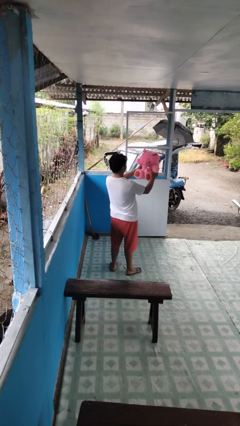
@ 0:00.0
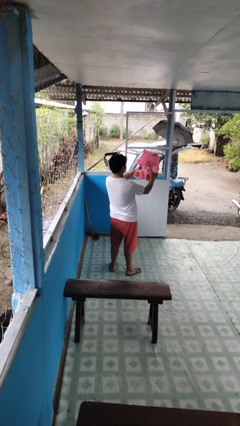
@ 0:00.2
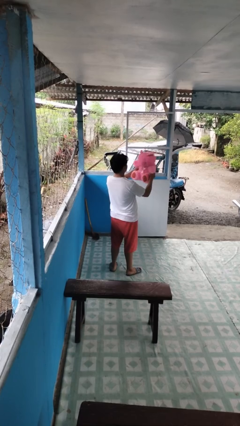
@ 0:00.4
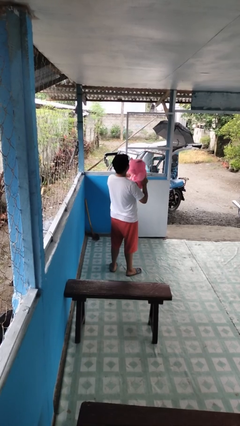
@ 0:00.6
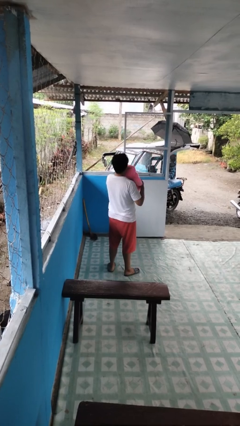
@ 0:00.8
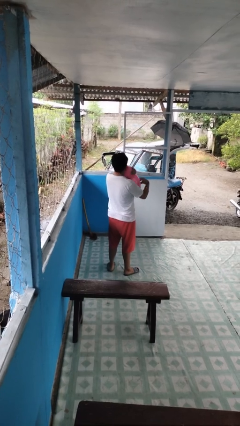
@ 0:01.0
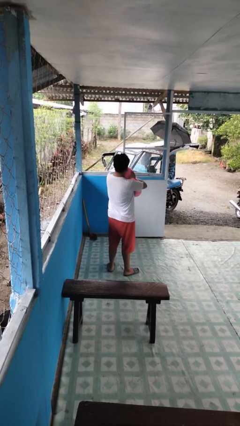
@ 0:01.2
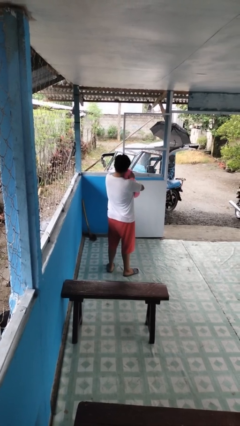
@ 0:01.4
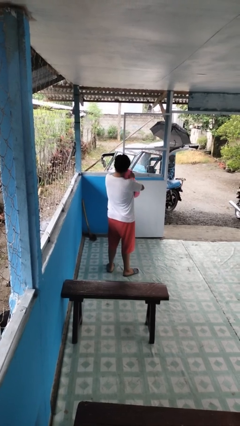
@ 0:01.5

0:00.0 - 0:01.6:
person hugs stuffed animal

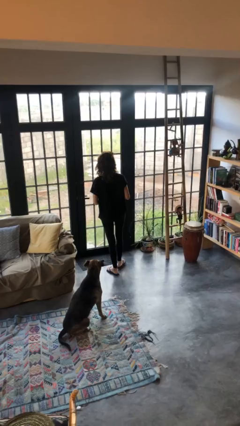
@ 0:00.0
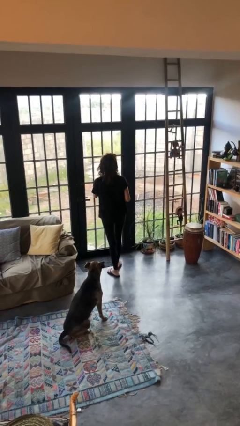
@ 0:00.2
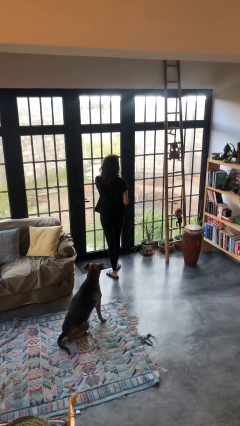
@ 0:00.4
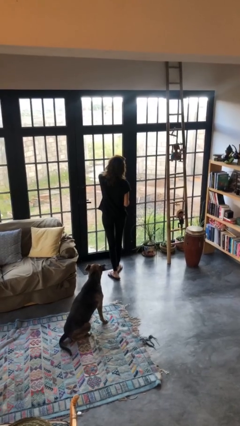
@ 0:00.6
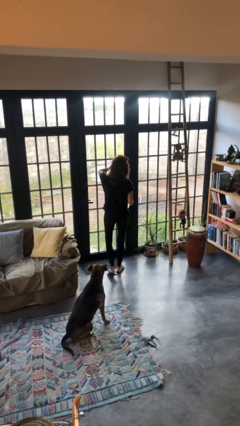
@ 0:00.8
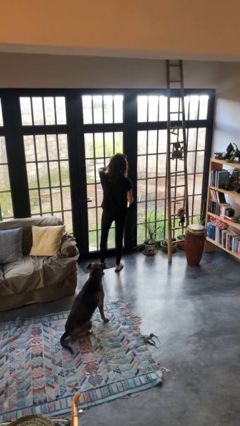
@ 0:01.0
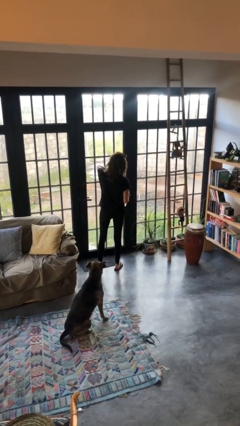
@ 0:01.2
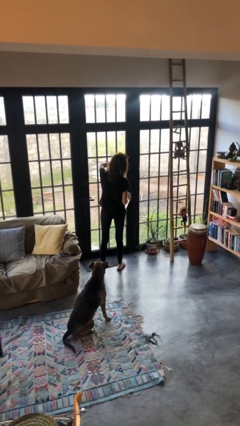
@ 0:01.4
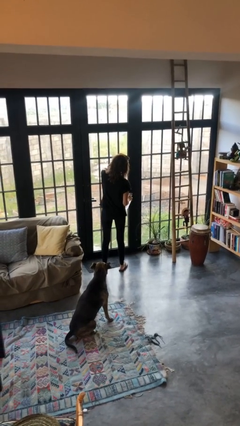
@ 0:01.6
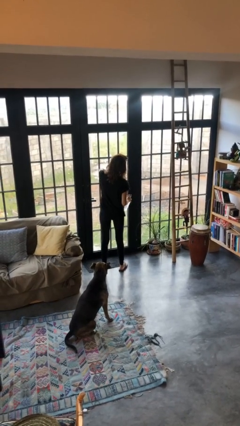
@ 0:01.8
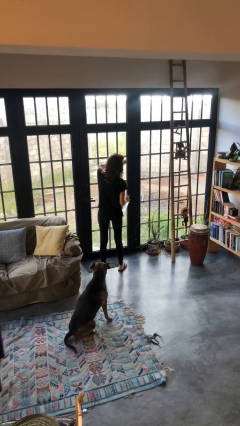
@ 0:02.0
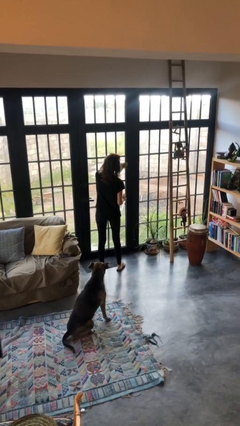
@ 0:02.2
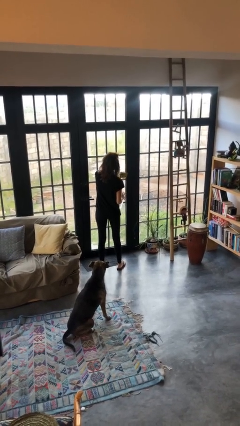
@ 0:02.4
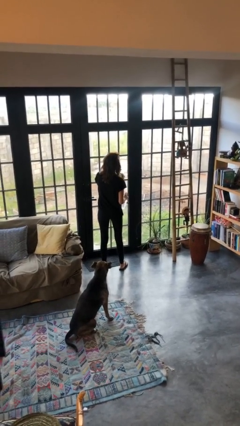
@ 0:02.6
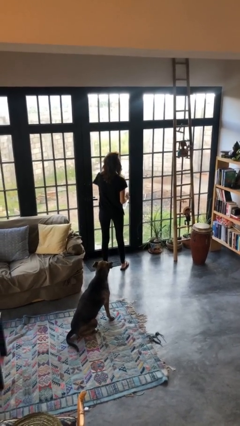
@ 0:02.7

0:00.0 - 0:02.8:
person washes window

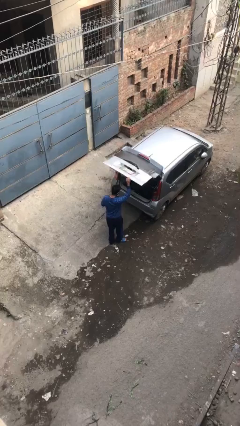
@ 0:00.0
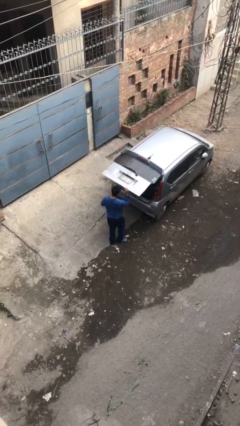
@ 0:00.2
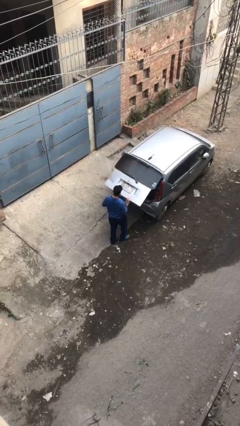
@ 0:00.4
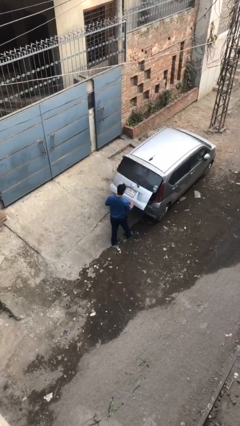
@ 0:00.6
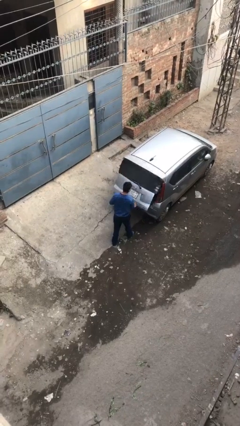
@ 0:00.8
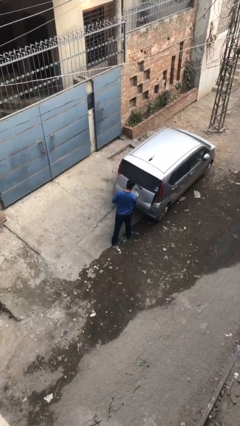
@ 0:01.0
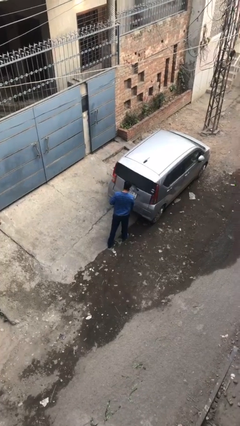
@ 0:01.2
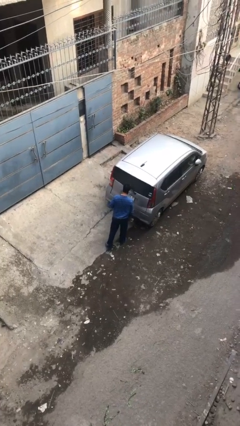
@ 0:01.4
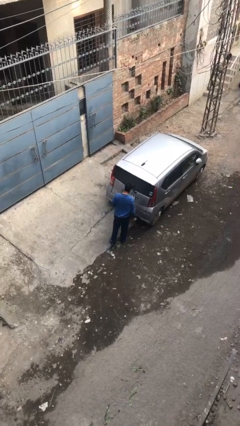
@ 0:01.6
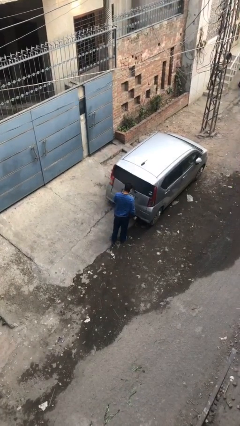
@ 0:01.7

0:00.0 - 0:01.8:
person closes car trunk

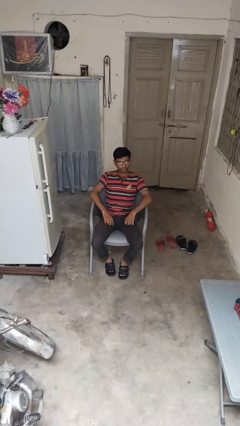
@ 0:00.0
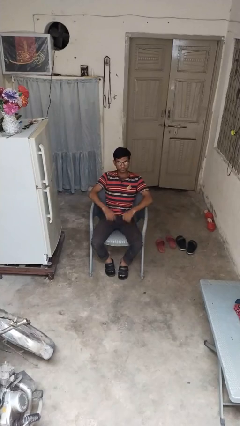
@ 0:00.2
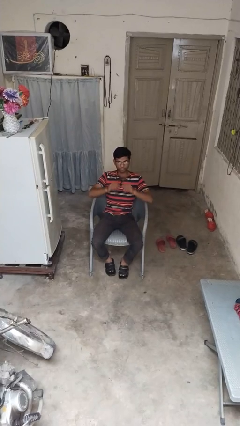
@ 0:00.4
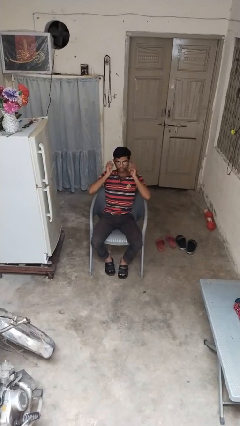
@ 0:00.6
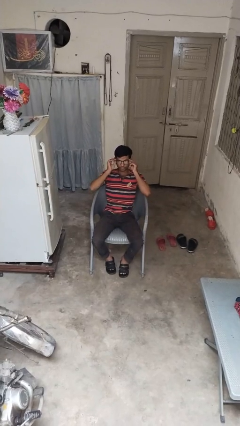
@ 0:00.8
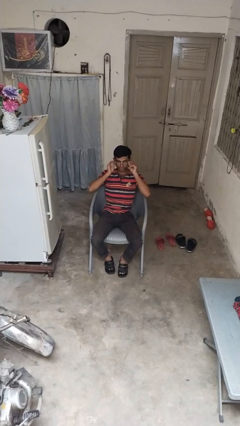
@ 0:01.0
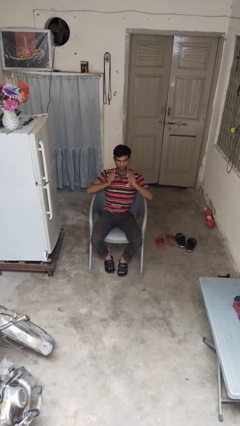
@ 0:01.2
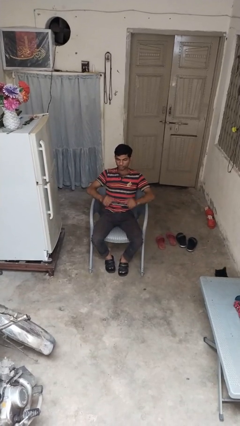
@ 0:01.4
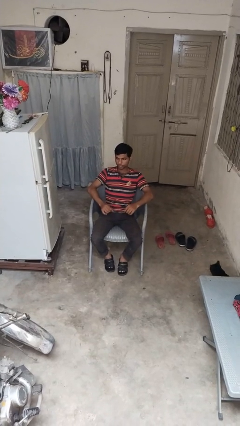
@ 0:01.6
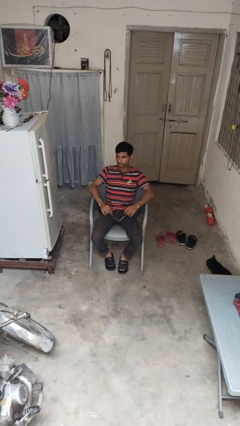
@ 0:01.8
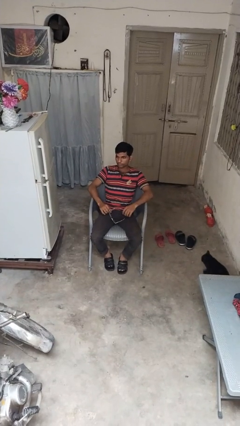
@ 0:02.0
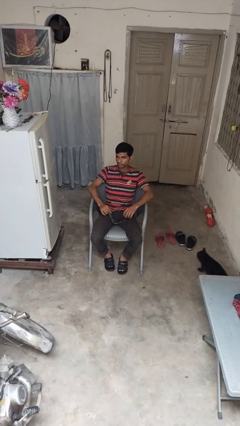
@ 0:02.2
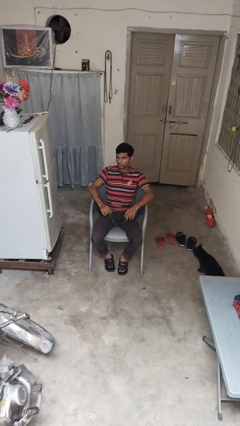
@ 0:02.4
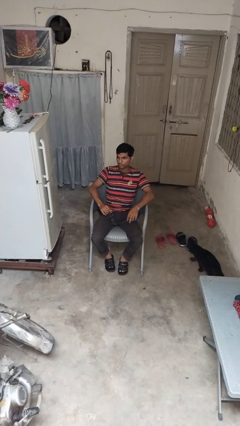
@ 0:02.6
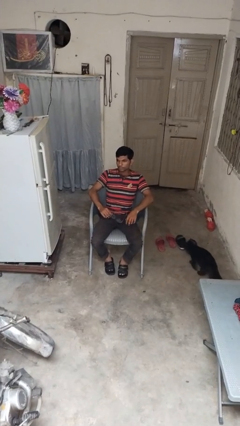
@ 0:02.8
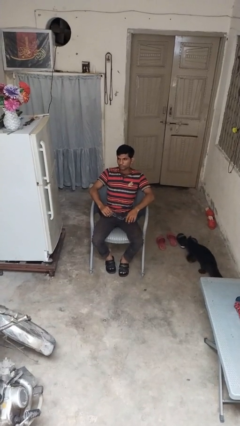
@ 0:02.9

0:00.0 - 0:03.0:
person takes off glasses

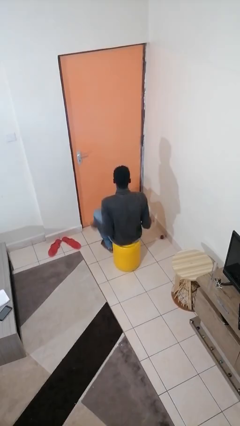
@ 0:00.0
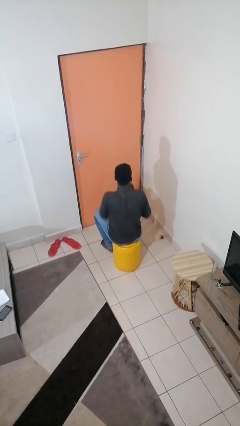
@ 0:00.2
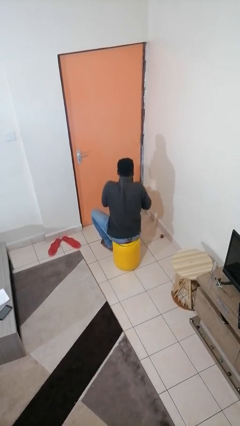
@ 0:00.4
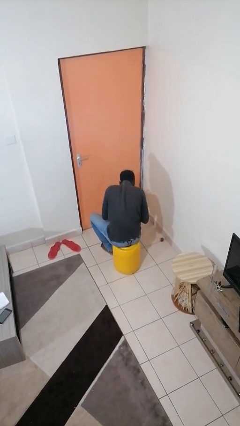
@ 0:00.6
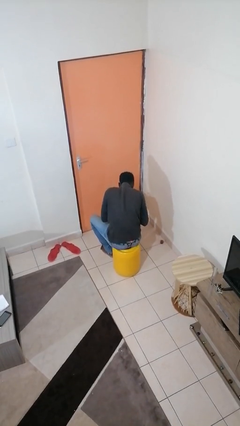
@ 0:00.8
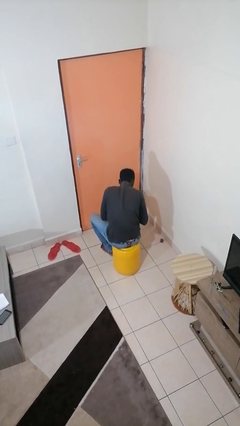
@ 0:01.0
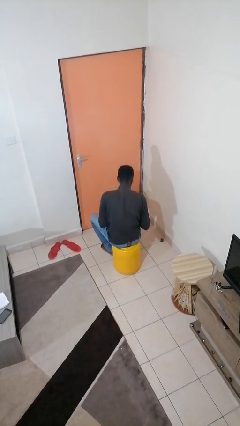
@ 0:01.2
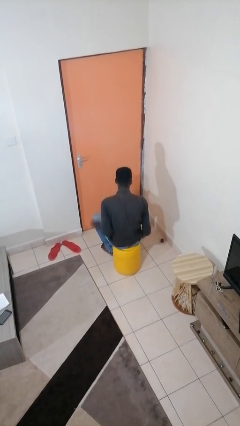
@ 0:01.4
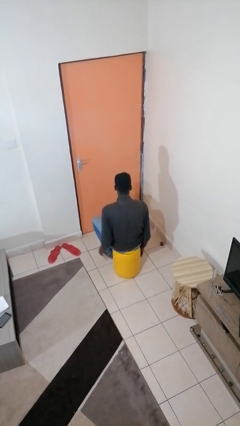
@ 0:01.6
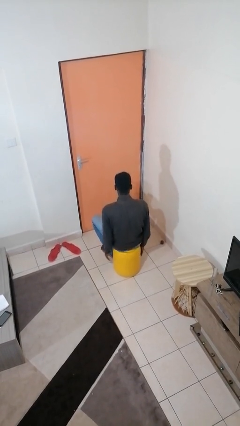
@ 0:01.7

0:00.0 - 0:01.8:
person sneezes into hand

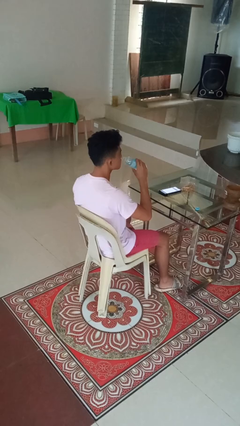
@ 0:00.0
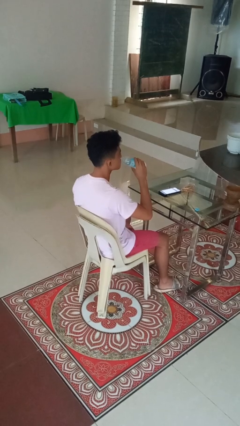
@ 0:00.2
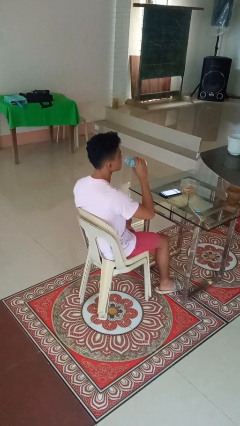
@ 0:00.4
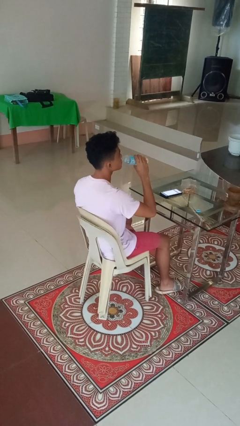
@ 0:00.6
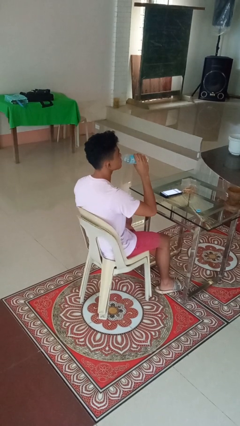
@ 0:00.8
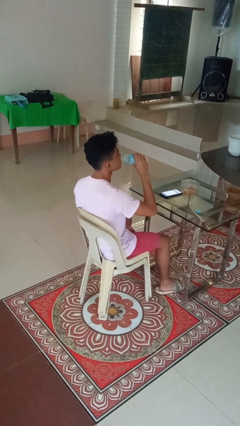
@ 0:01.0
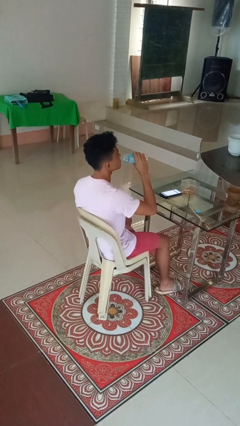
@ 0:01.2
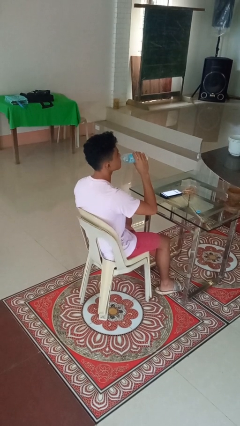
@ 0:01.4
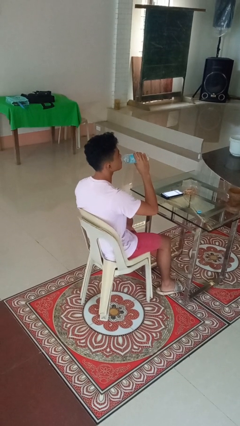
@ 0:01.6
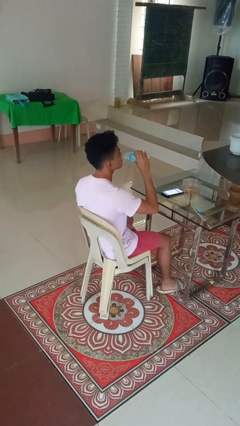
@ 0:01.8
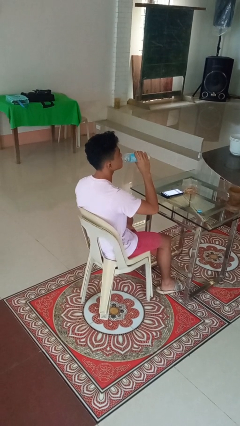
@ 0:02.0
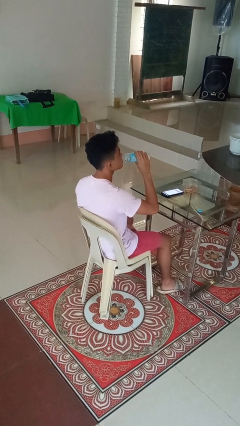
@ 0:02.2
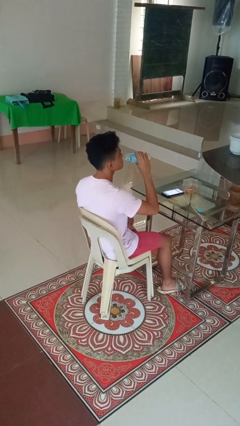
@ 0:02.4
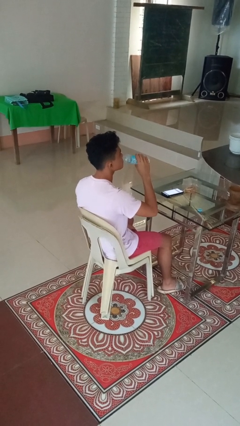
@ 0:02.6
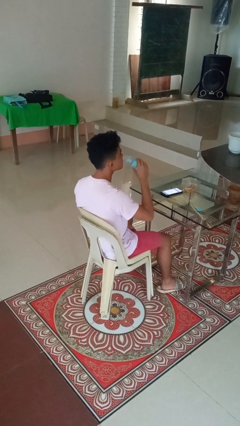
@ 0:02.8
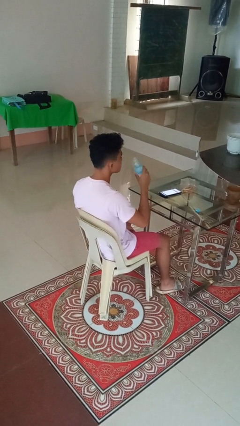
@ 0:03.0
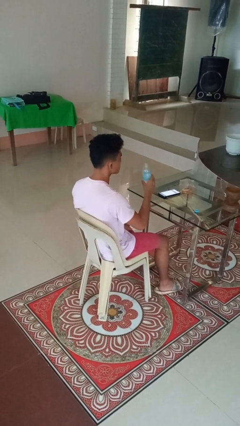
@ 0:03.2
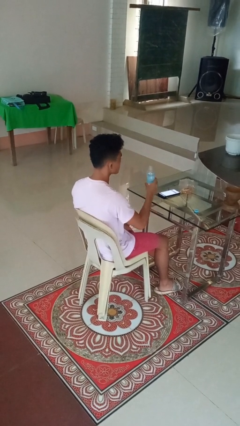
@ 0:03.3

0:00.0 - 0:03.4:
person drinks from bottle

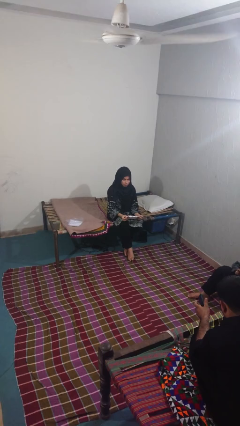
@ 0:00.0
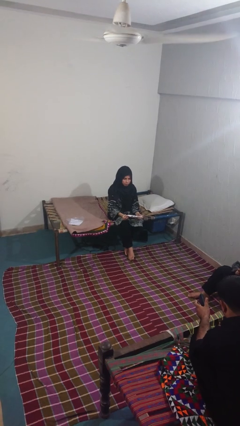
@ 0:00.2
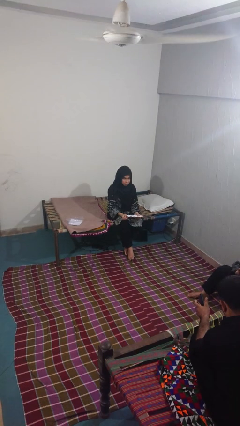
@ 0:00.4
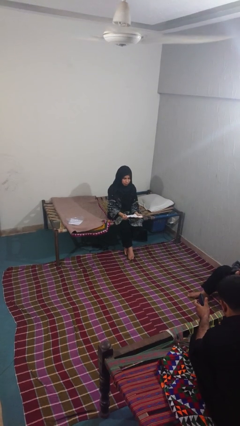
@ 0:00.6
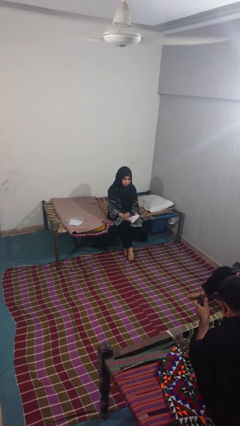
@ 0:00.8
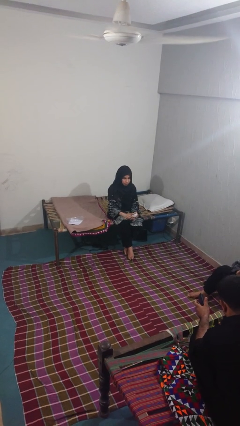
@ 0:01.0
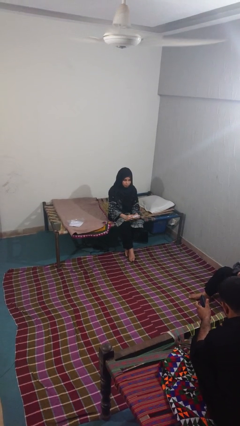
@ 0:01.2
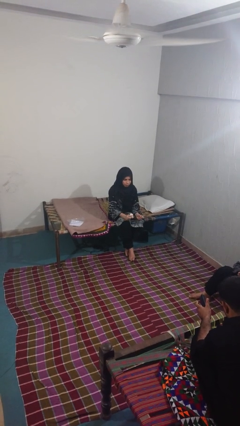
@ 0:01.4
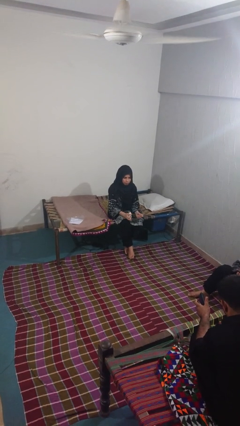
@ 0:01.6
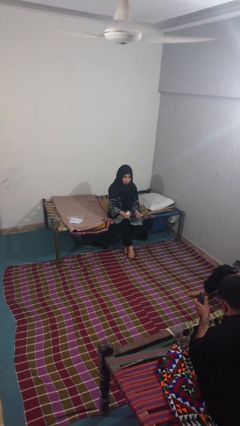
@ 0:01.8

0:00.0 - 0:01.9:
person crumples paper

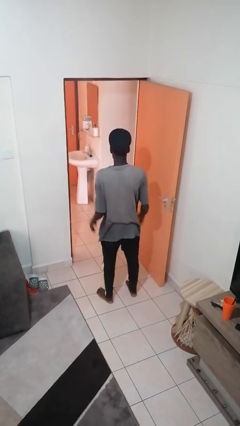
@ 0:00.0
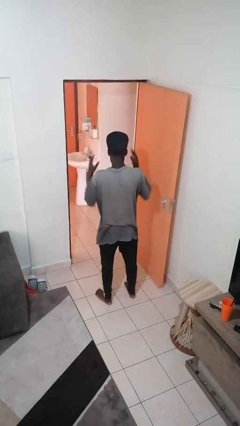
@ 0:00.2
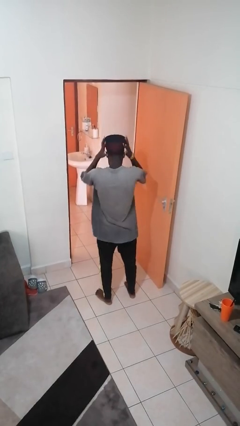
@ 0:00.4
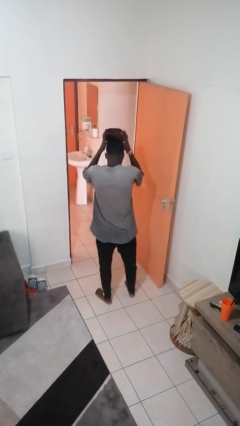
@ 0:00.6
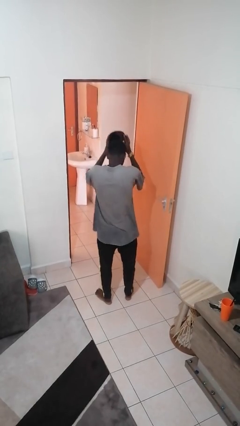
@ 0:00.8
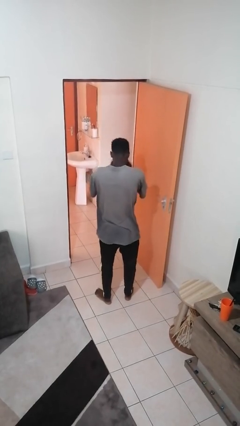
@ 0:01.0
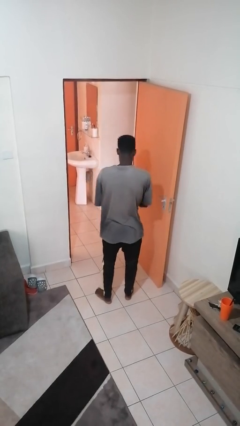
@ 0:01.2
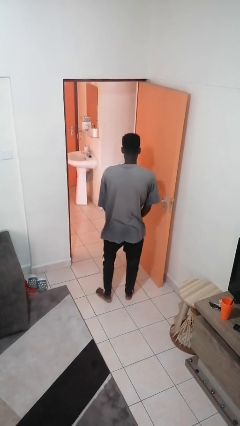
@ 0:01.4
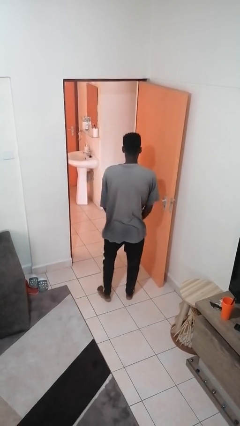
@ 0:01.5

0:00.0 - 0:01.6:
person takes off hat
